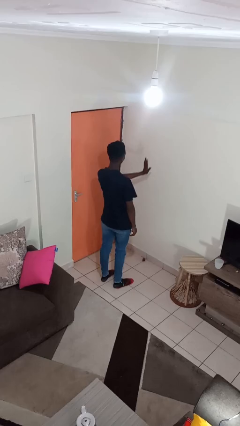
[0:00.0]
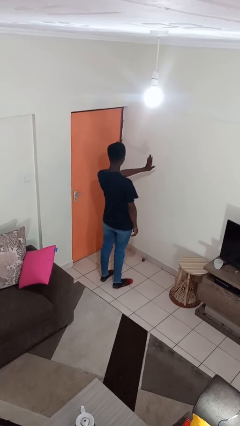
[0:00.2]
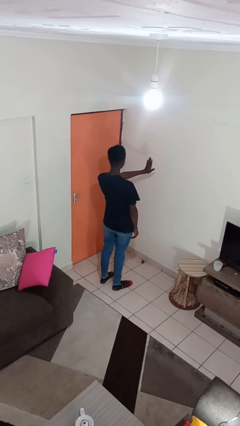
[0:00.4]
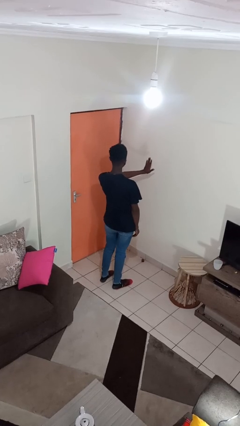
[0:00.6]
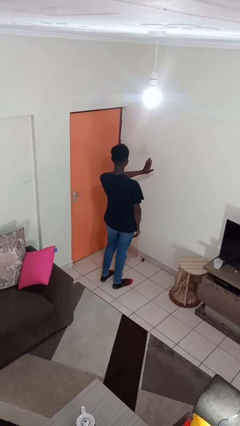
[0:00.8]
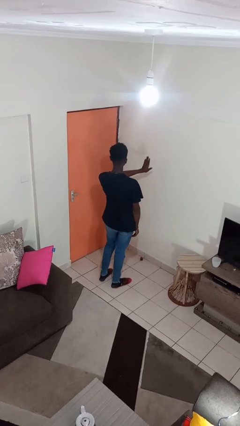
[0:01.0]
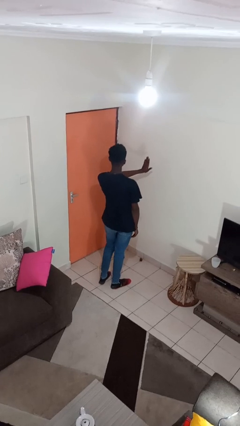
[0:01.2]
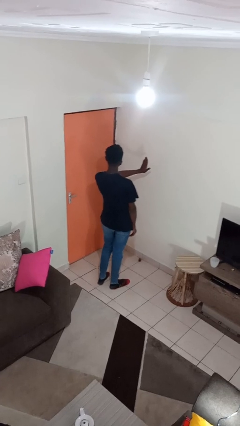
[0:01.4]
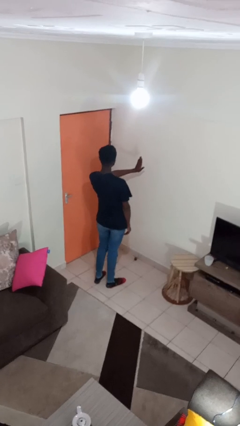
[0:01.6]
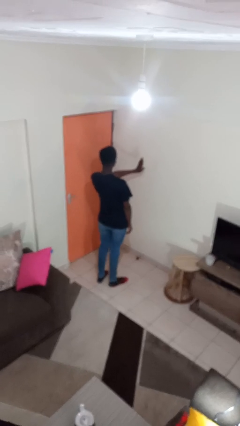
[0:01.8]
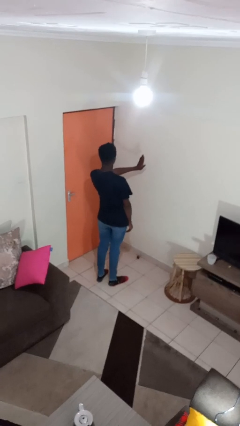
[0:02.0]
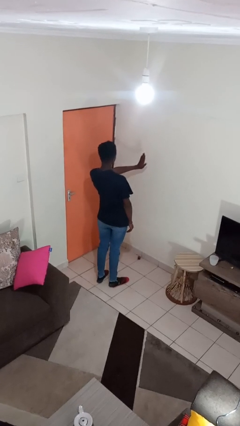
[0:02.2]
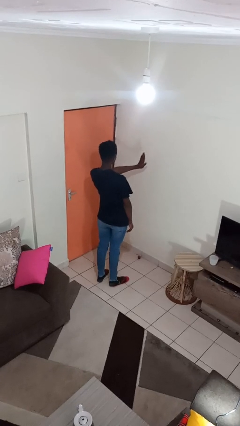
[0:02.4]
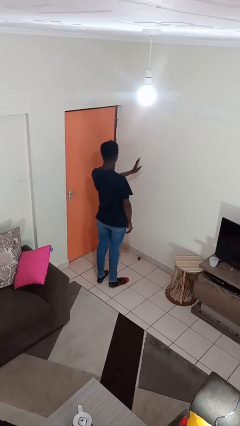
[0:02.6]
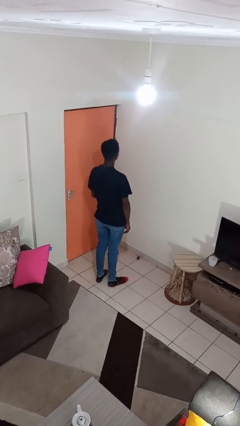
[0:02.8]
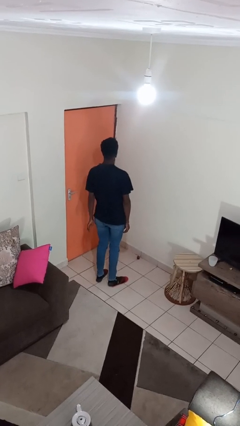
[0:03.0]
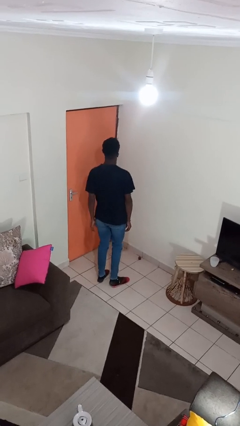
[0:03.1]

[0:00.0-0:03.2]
person gestures stop

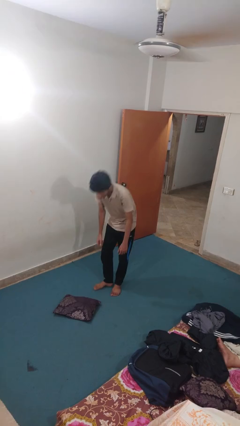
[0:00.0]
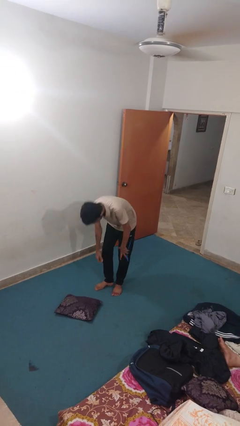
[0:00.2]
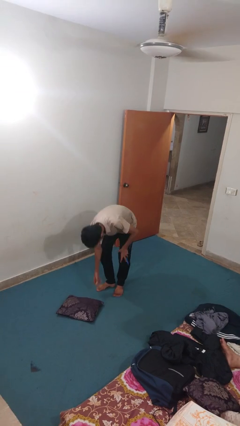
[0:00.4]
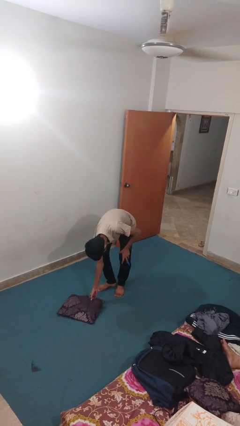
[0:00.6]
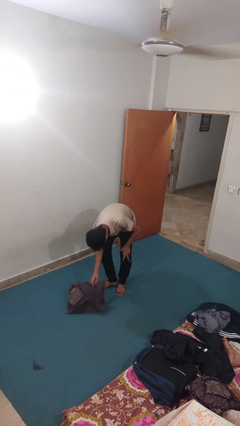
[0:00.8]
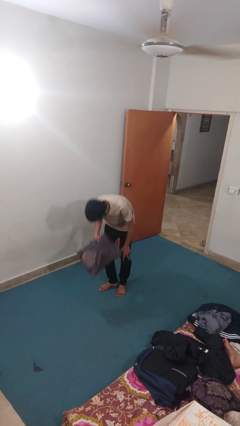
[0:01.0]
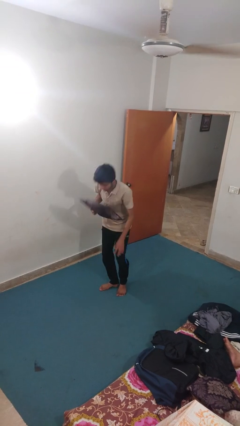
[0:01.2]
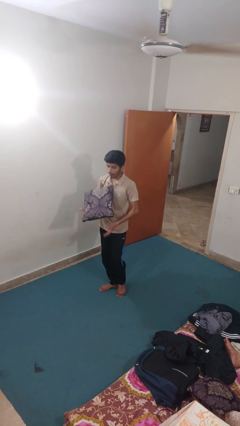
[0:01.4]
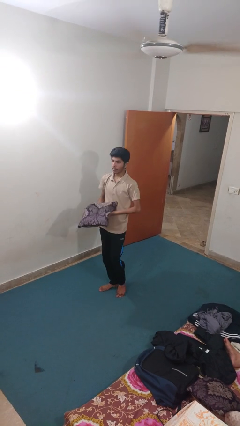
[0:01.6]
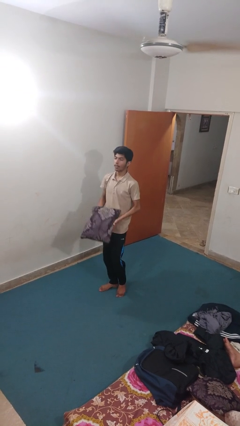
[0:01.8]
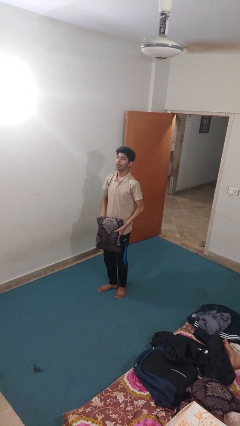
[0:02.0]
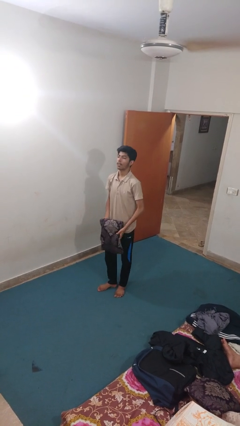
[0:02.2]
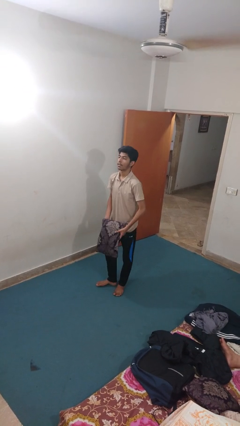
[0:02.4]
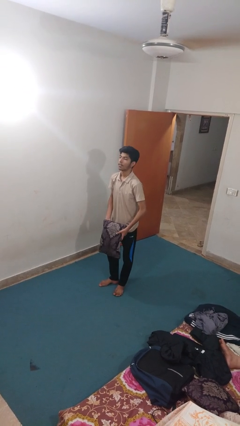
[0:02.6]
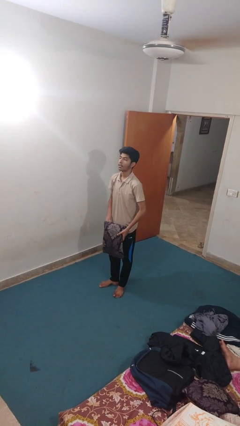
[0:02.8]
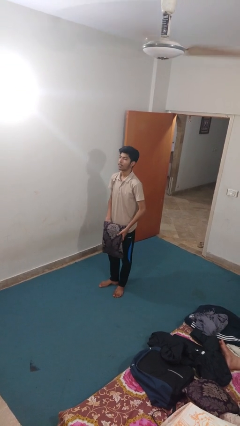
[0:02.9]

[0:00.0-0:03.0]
person picks up object from floor

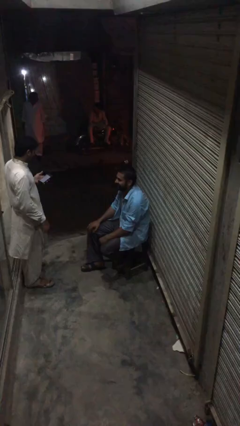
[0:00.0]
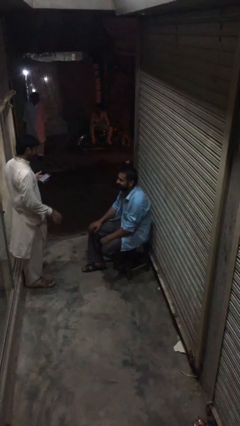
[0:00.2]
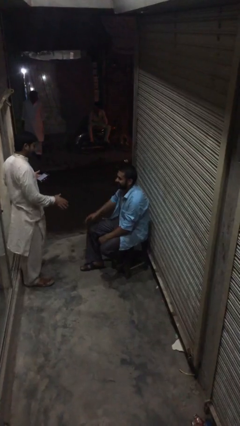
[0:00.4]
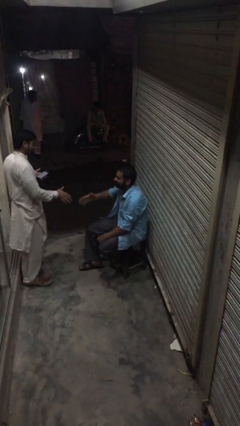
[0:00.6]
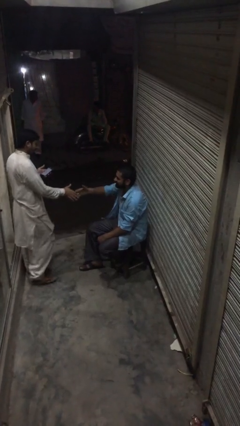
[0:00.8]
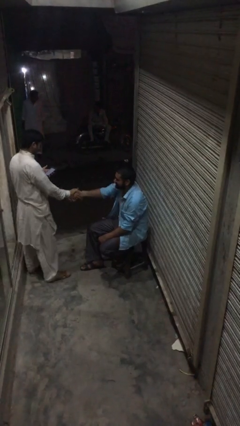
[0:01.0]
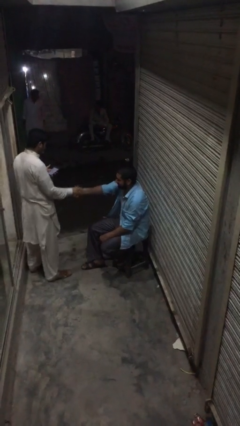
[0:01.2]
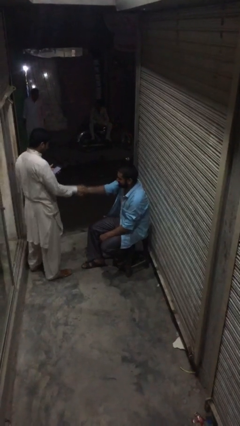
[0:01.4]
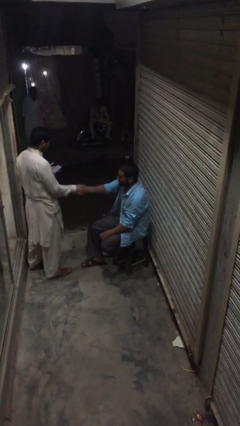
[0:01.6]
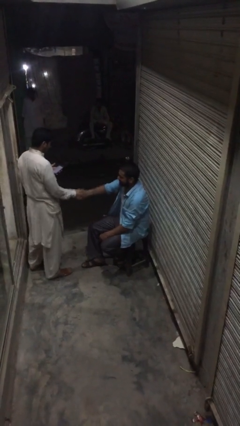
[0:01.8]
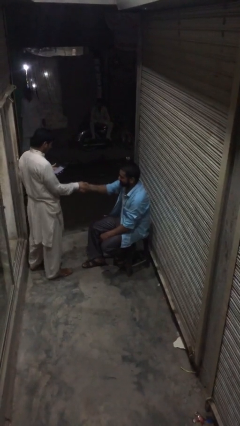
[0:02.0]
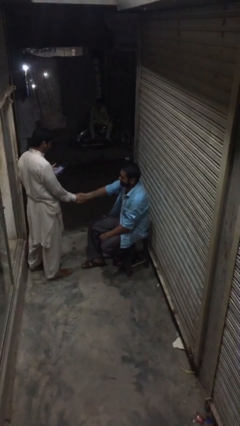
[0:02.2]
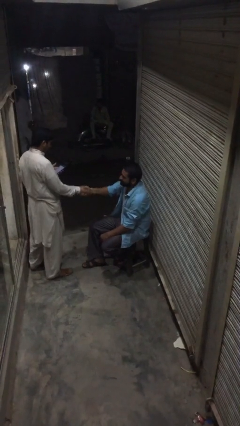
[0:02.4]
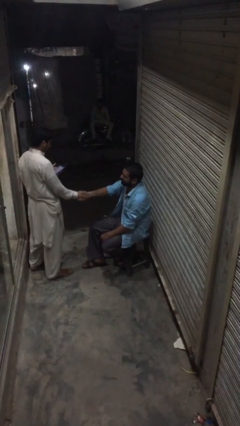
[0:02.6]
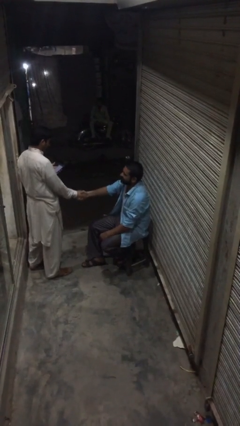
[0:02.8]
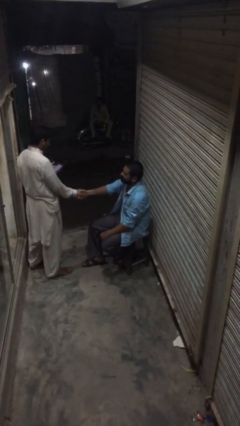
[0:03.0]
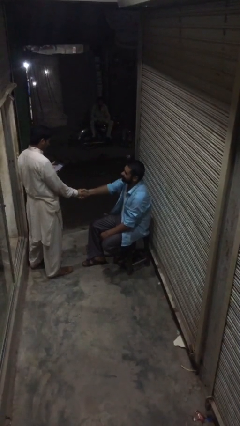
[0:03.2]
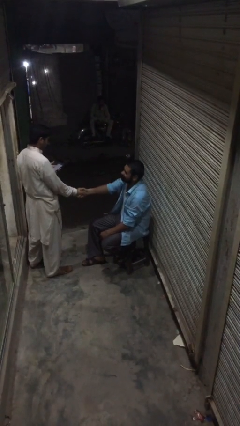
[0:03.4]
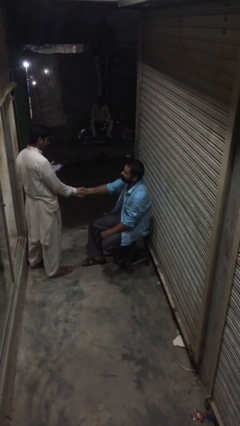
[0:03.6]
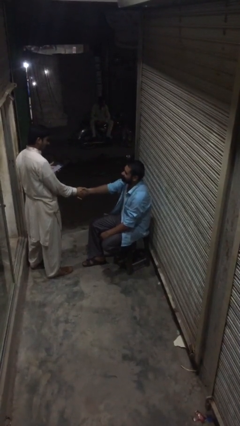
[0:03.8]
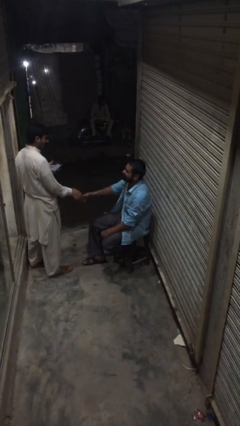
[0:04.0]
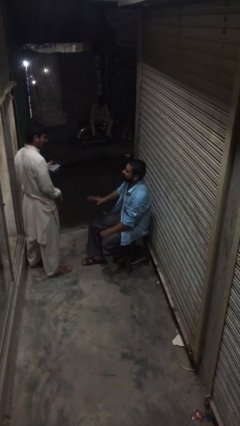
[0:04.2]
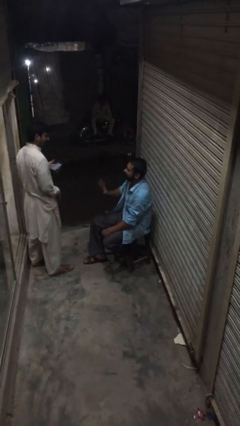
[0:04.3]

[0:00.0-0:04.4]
person shakes hand

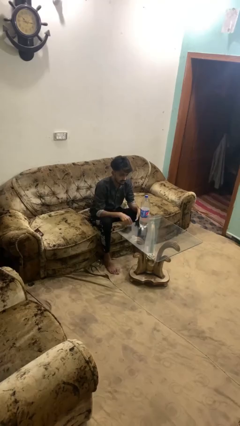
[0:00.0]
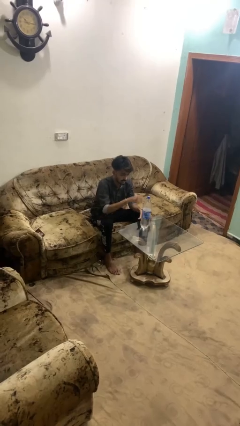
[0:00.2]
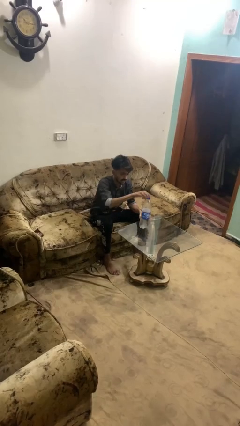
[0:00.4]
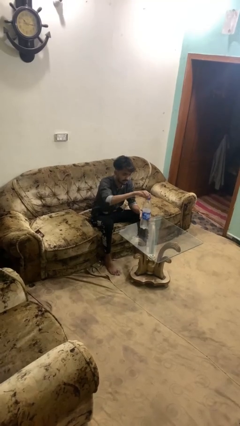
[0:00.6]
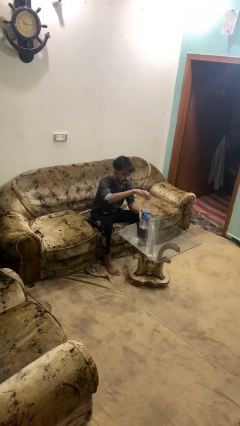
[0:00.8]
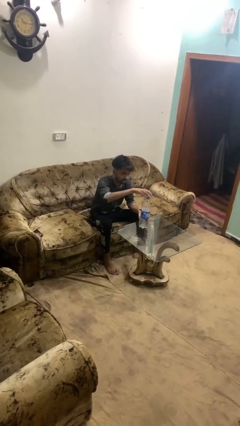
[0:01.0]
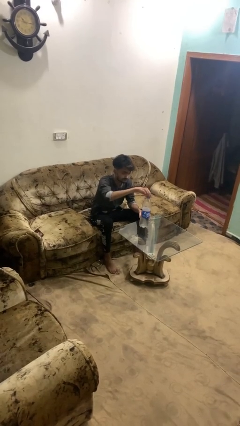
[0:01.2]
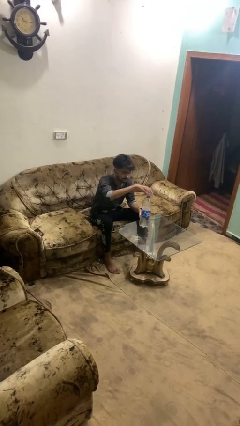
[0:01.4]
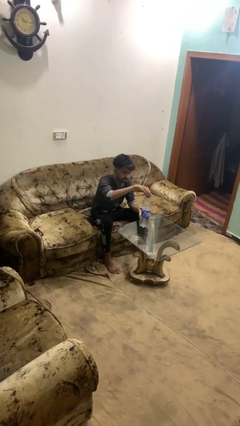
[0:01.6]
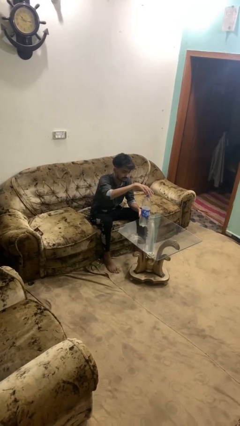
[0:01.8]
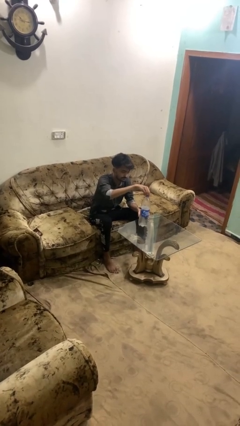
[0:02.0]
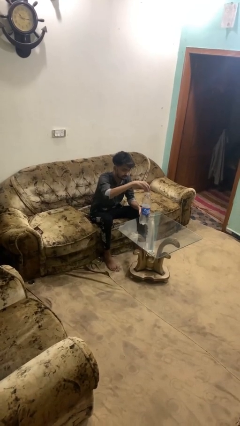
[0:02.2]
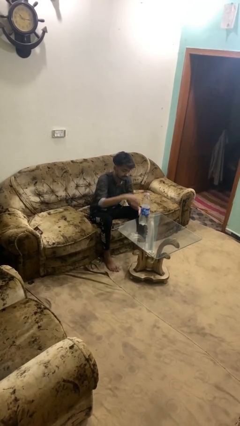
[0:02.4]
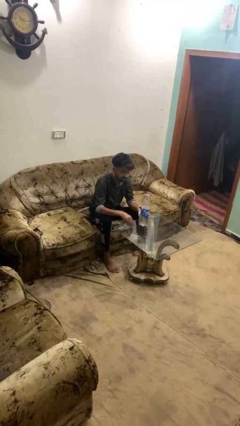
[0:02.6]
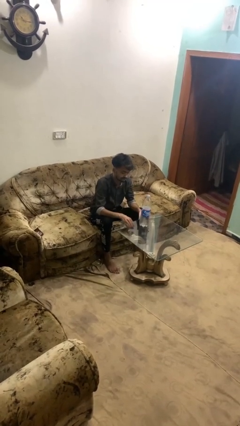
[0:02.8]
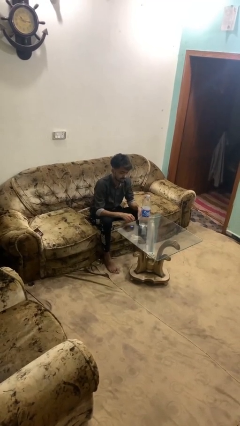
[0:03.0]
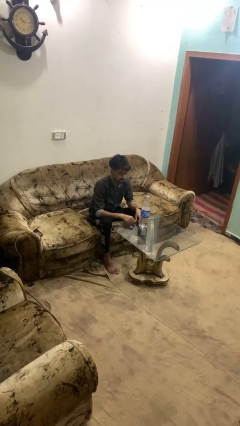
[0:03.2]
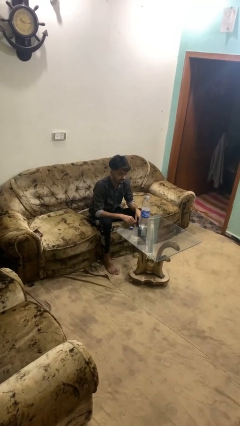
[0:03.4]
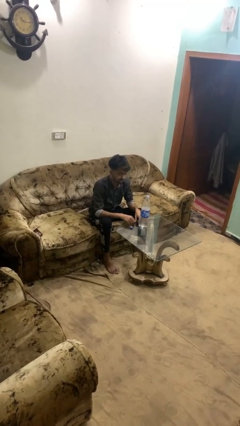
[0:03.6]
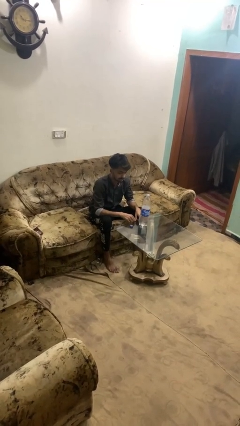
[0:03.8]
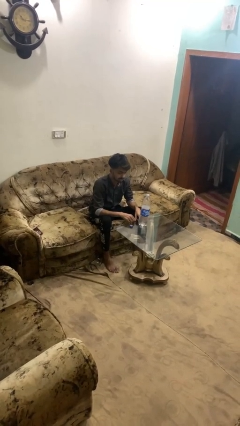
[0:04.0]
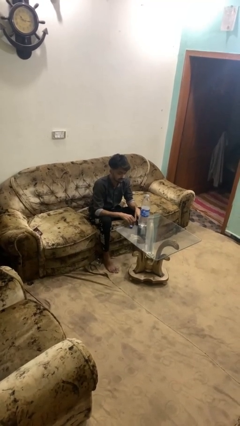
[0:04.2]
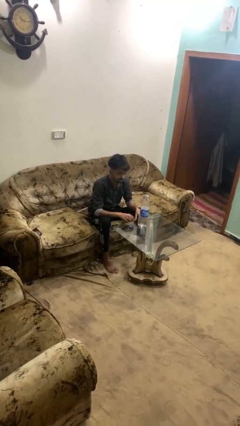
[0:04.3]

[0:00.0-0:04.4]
person unscrews lid from bottle

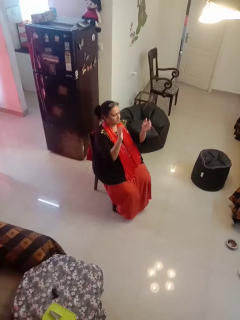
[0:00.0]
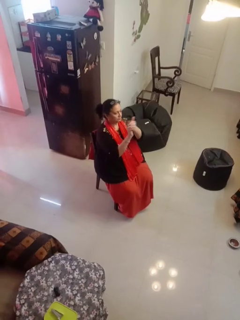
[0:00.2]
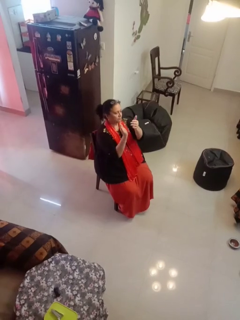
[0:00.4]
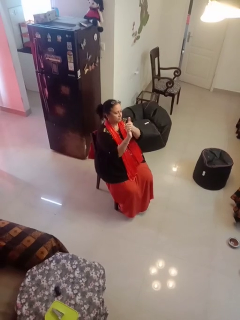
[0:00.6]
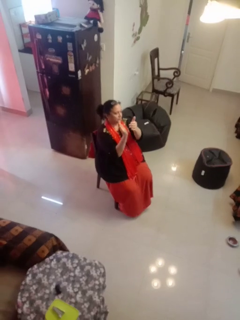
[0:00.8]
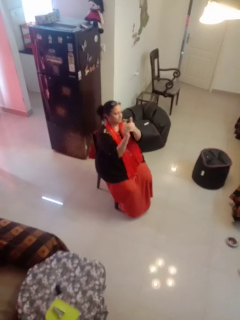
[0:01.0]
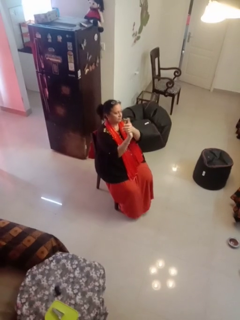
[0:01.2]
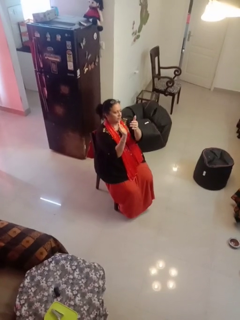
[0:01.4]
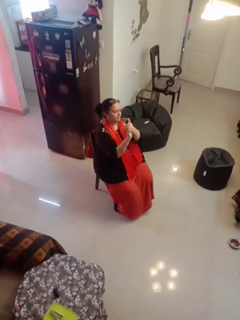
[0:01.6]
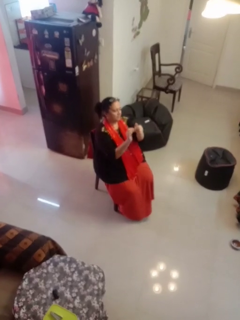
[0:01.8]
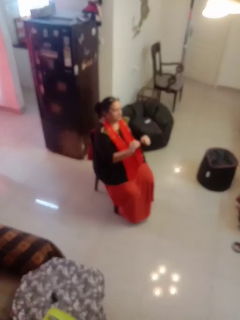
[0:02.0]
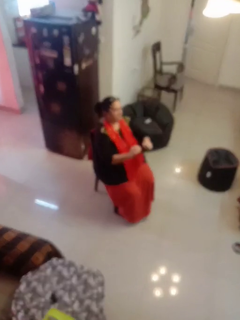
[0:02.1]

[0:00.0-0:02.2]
person claps hands

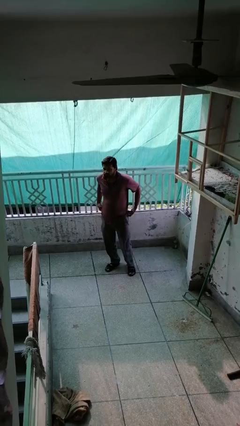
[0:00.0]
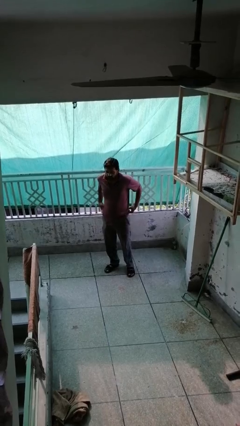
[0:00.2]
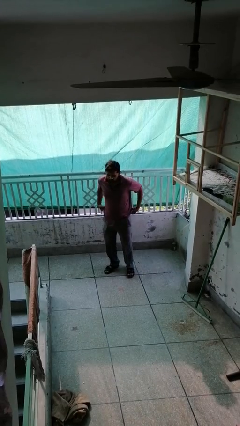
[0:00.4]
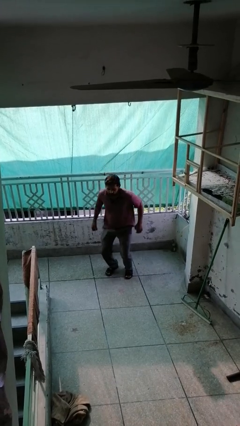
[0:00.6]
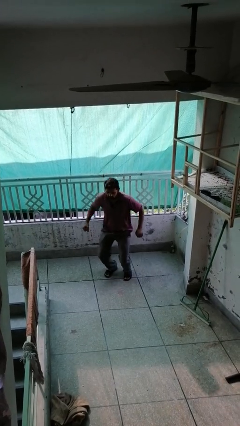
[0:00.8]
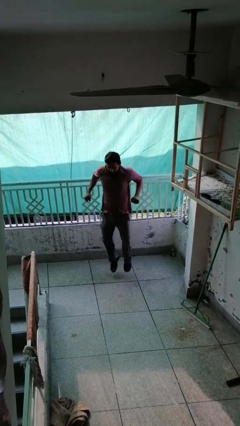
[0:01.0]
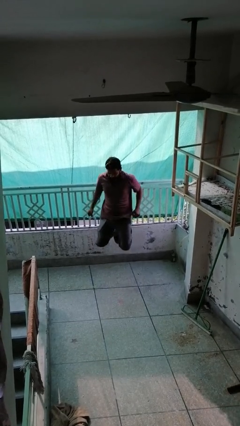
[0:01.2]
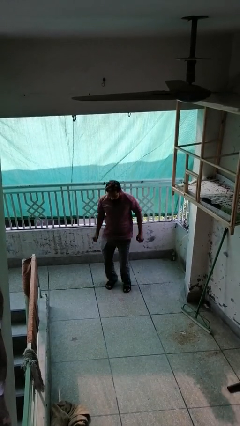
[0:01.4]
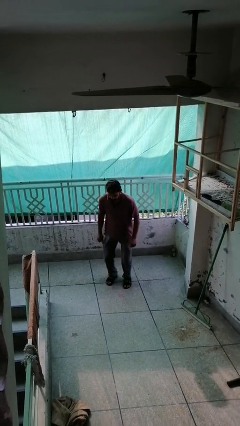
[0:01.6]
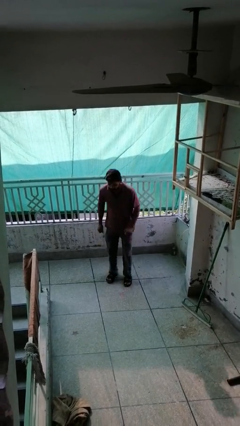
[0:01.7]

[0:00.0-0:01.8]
person jumps
